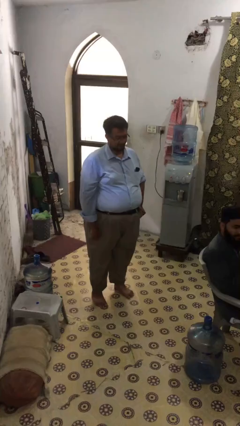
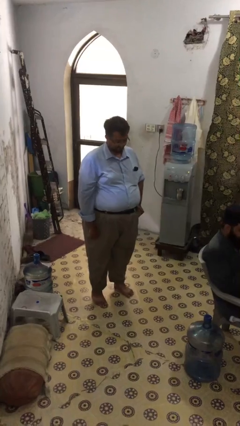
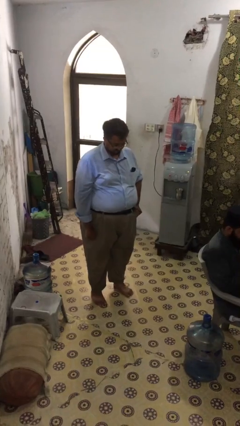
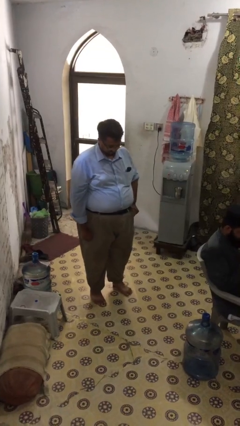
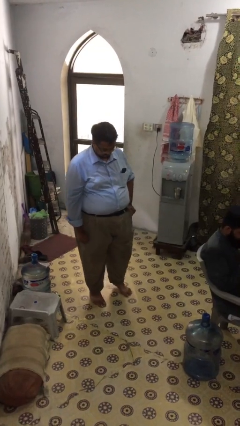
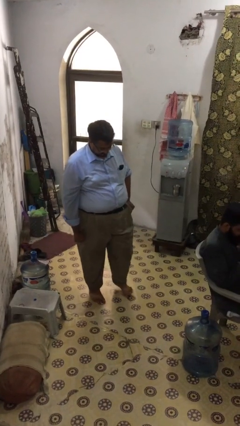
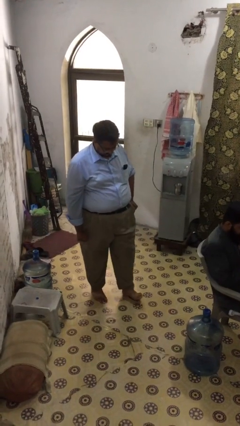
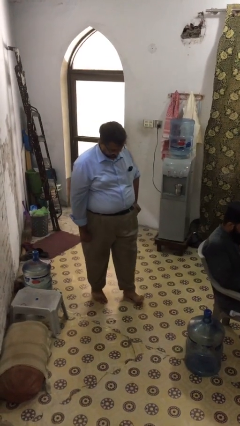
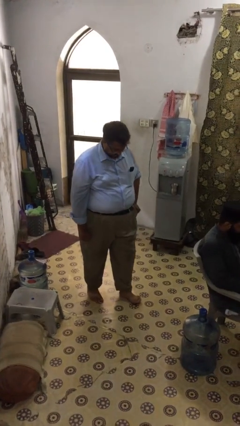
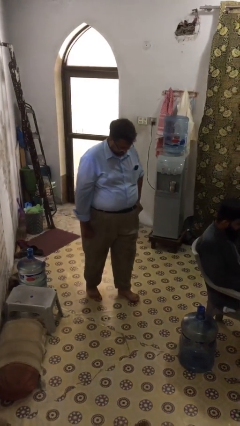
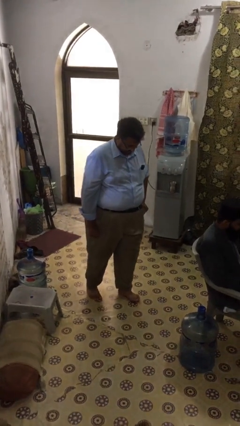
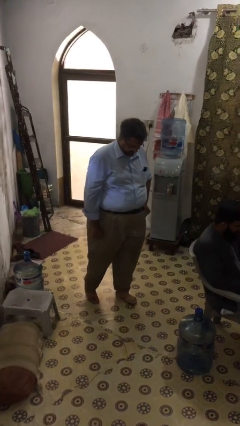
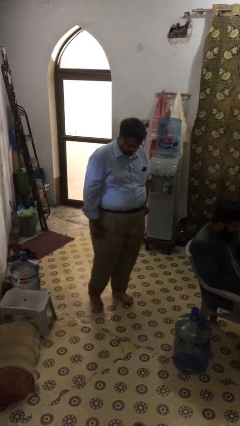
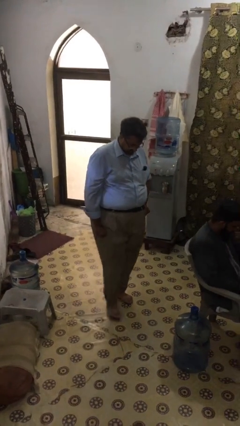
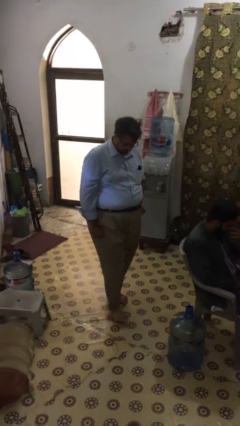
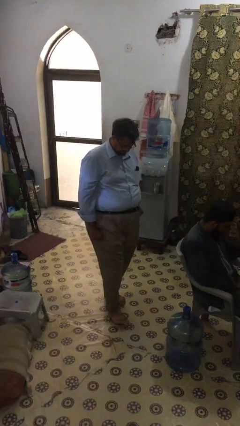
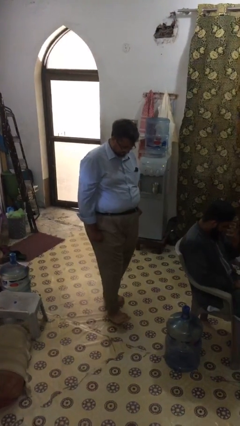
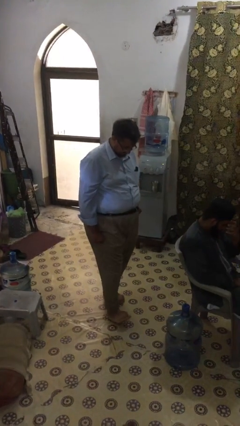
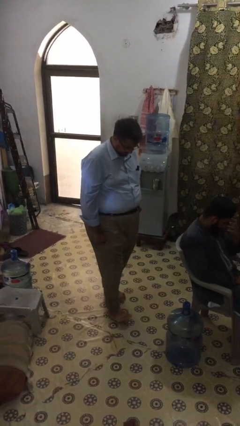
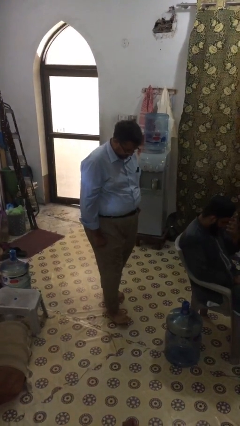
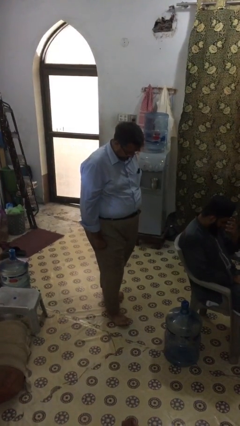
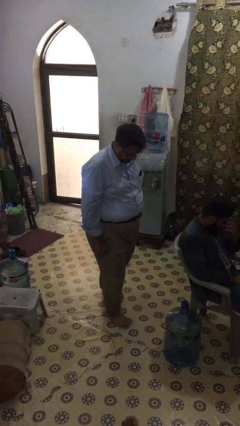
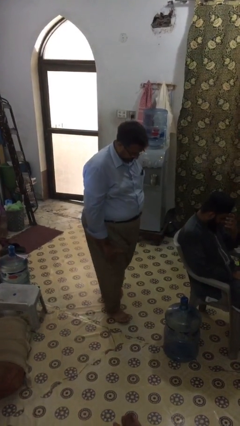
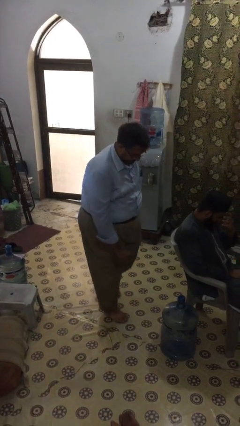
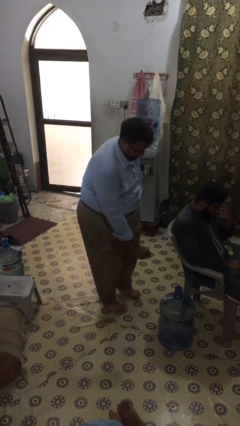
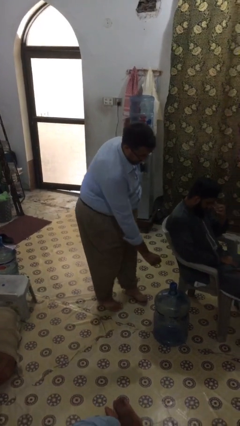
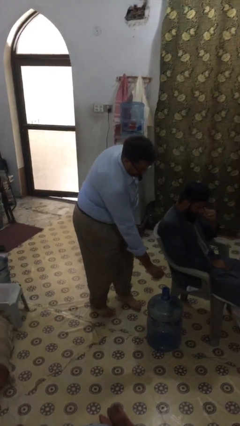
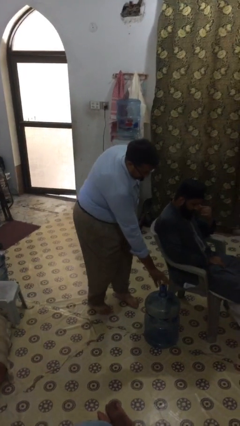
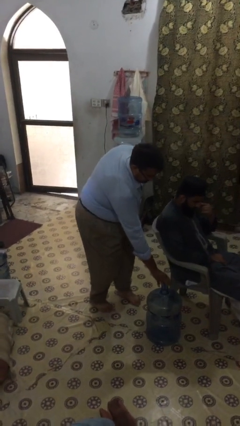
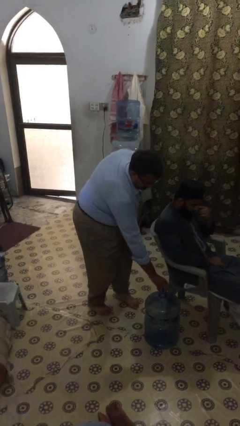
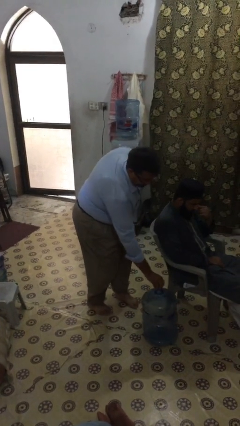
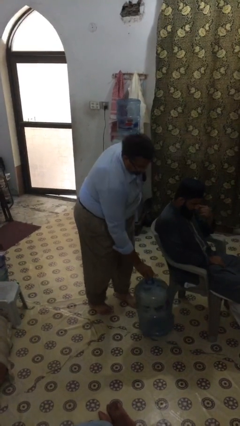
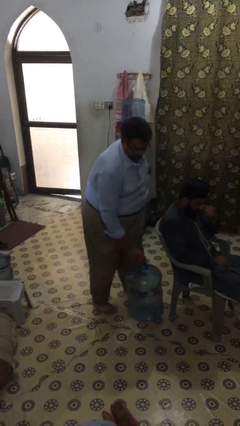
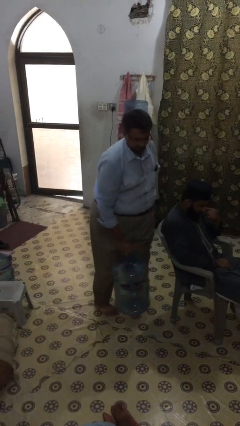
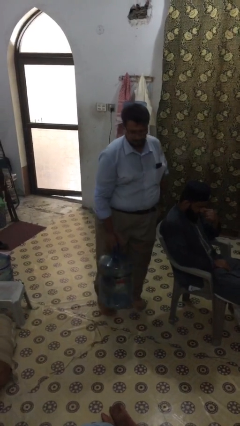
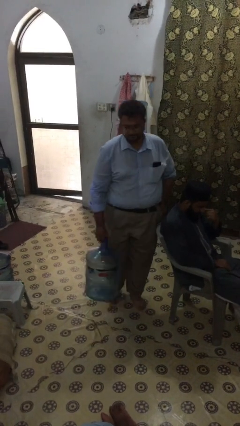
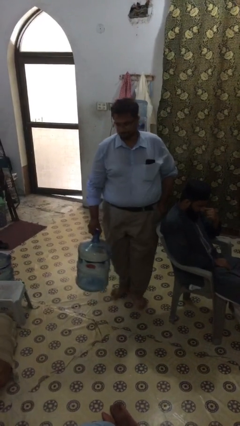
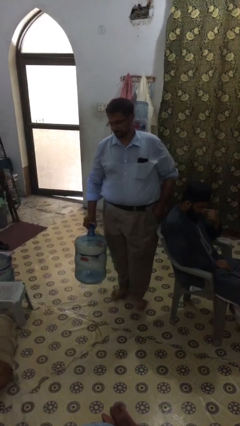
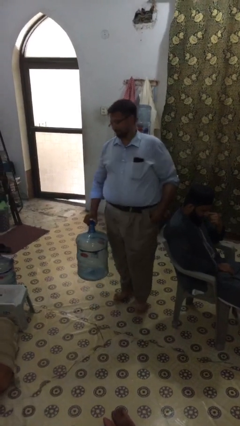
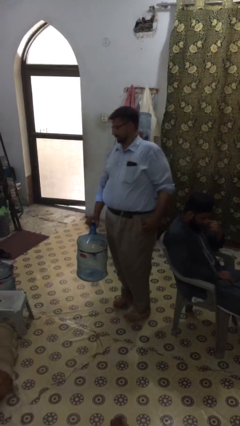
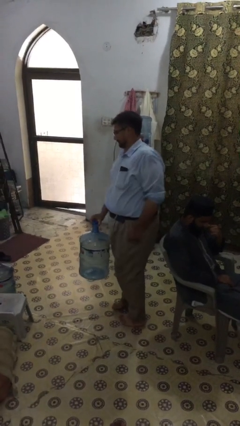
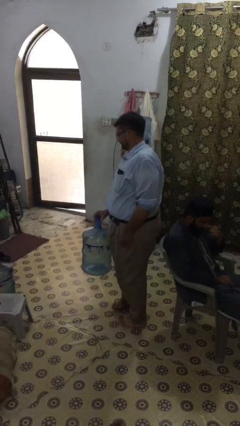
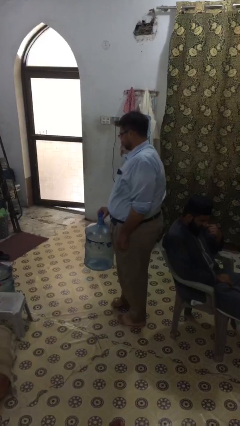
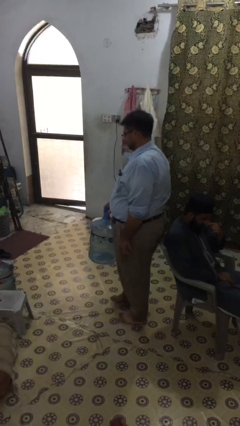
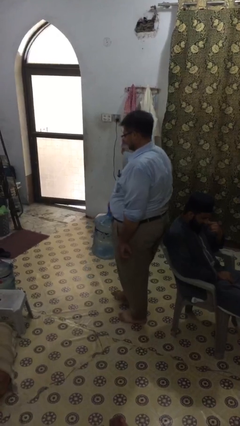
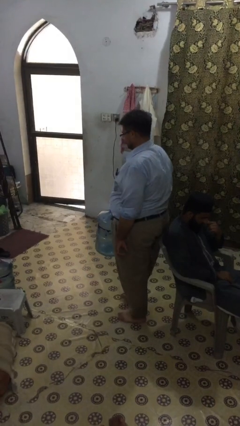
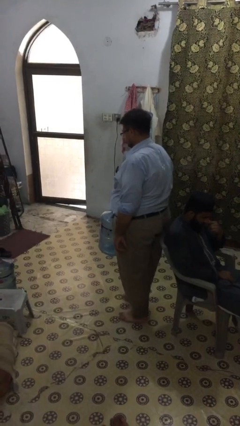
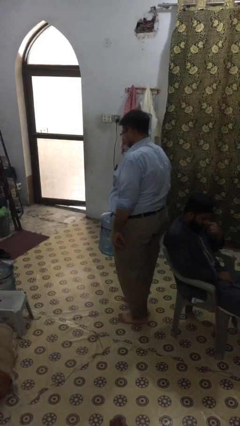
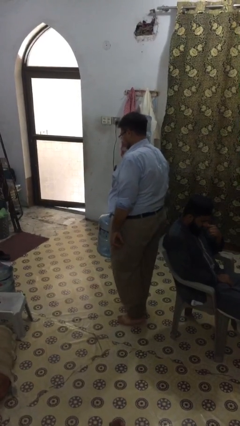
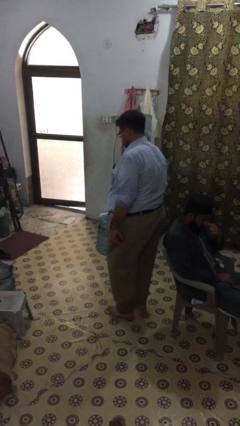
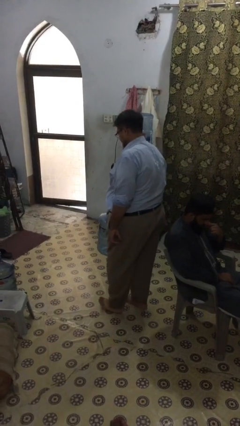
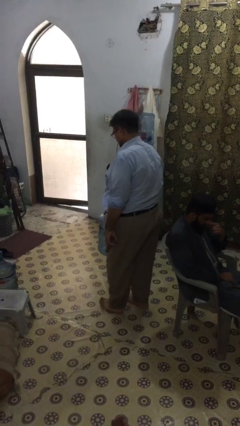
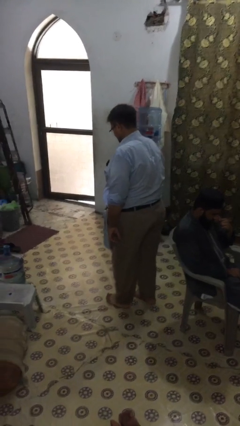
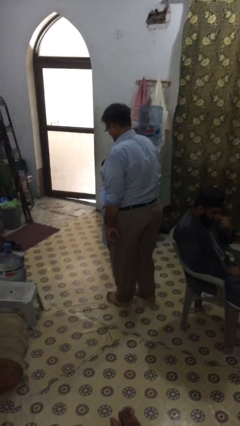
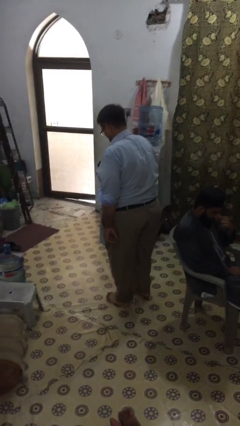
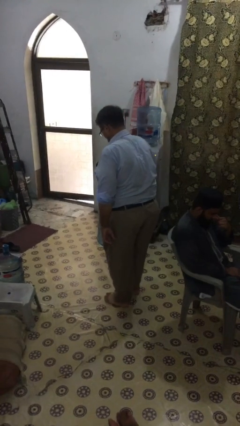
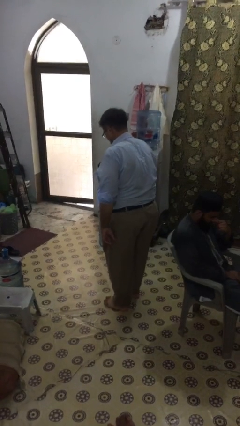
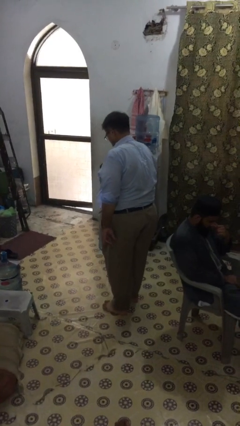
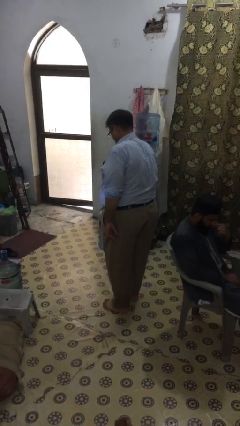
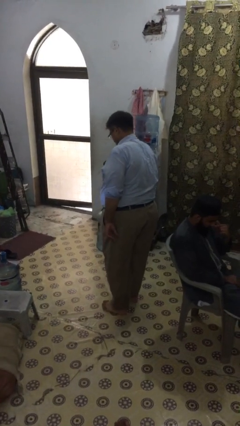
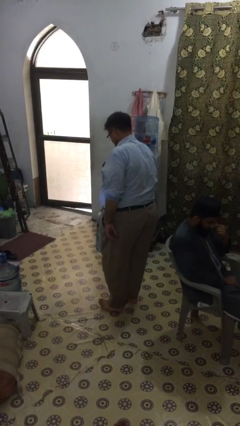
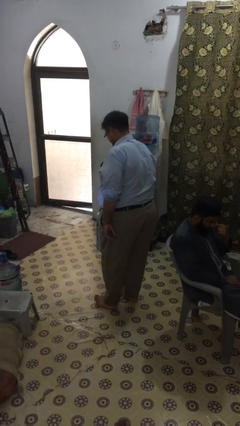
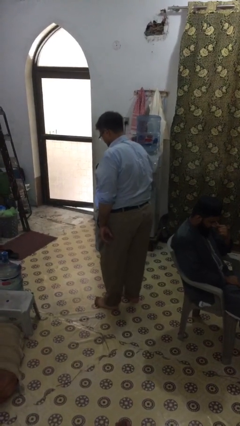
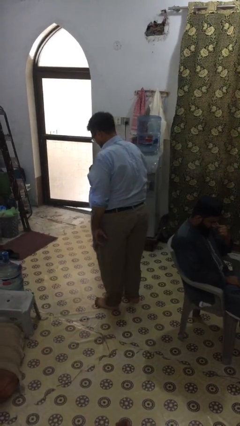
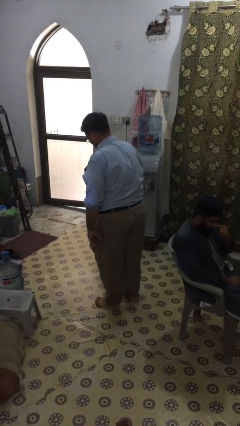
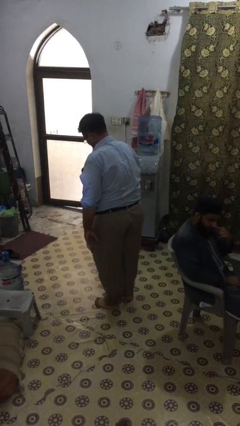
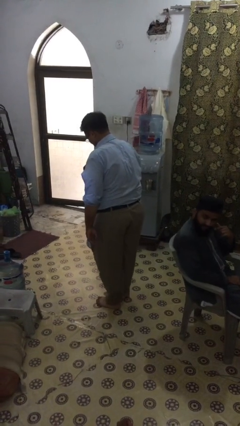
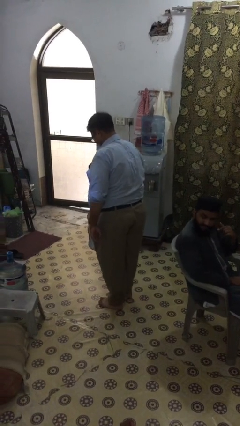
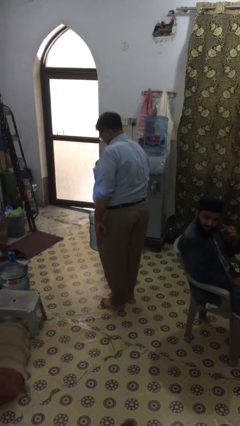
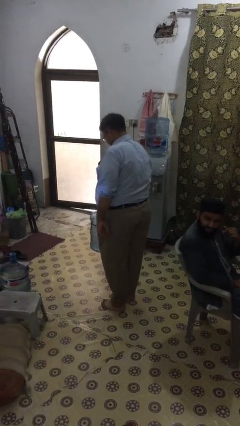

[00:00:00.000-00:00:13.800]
person steals object from person

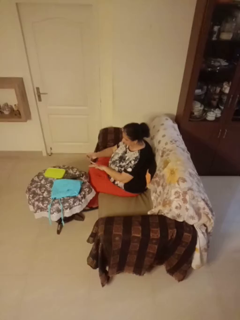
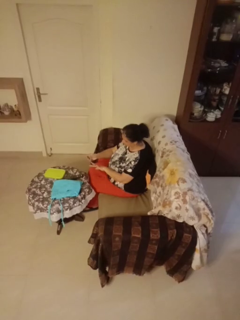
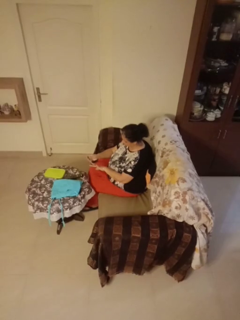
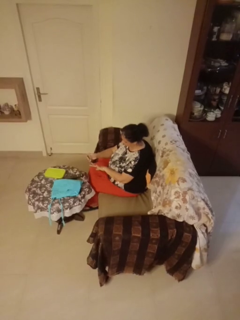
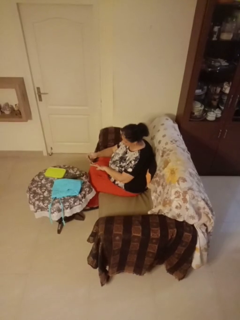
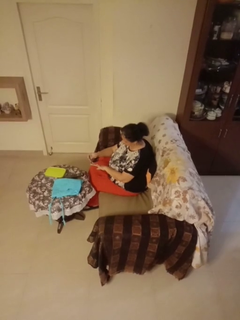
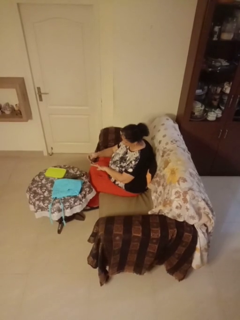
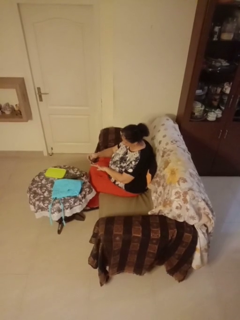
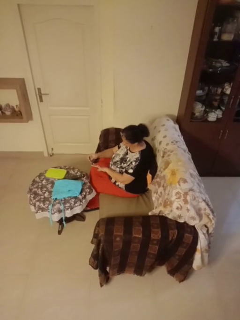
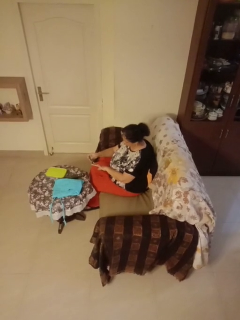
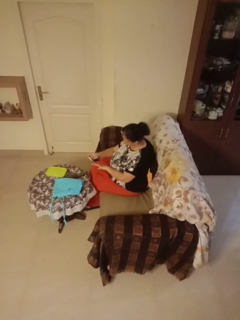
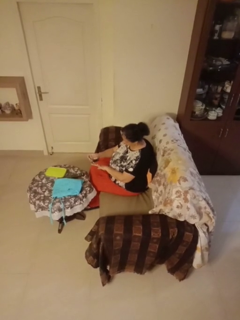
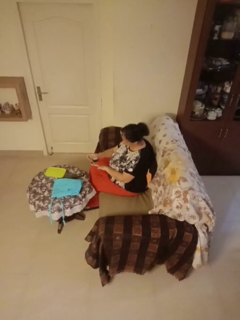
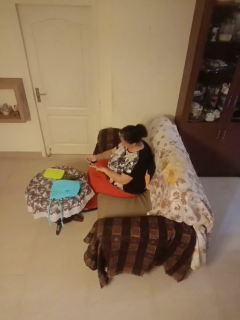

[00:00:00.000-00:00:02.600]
person clips fingernails

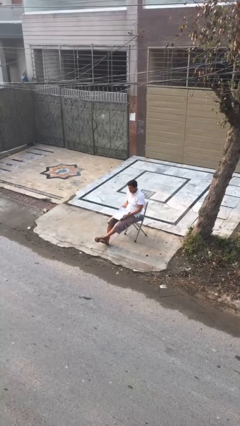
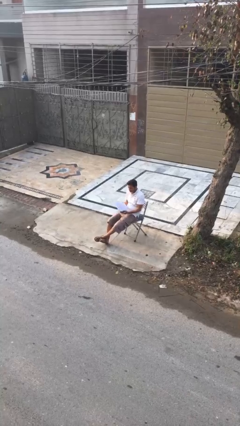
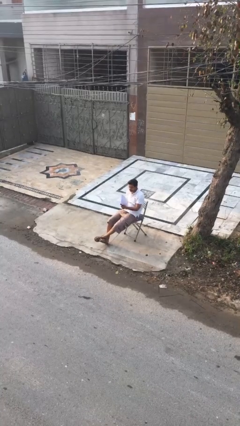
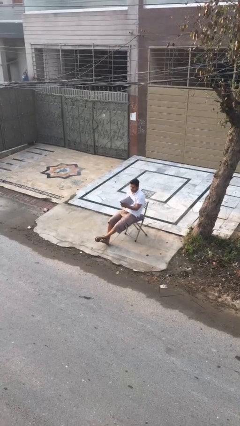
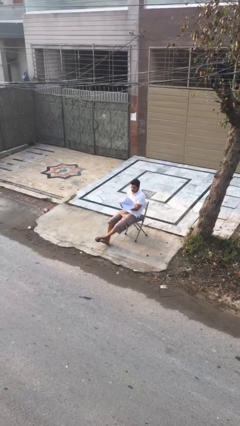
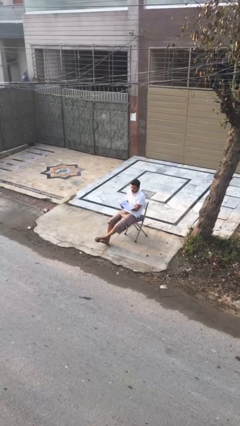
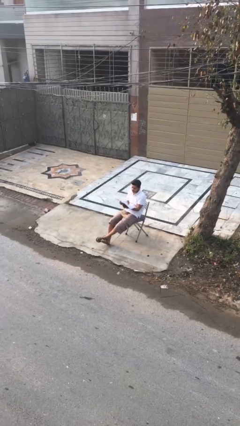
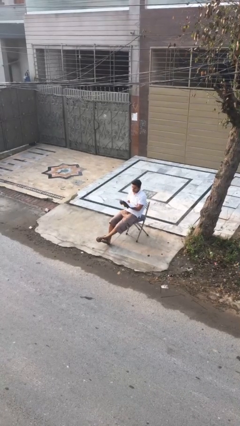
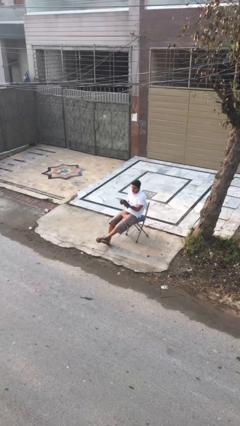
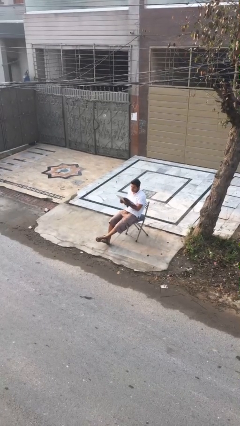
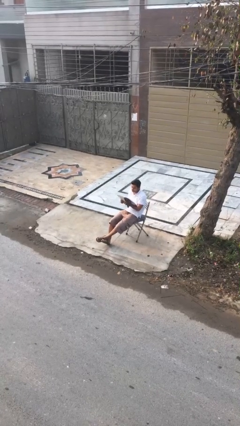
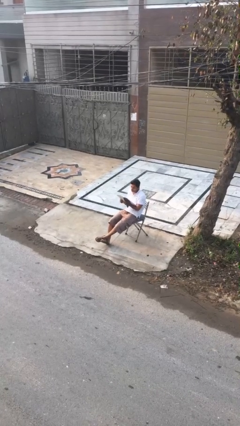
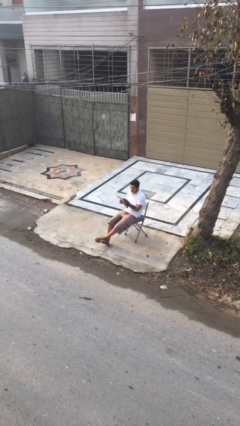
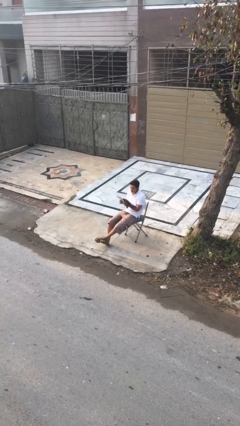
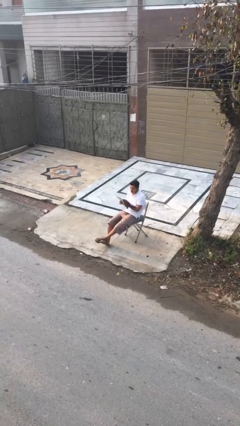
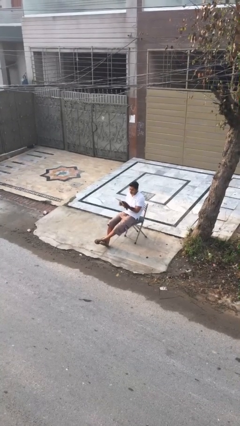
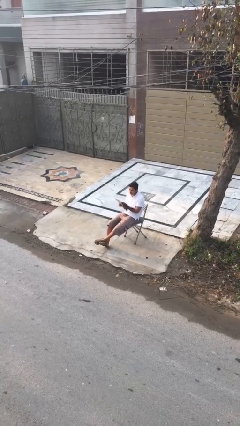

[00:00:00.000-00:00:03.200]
person reads document
